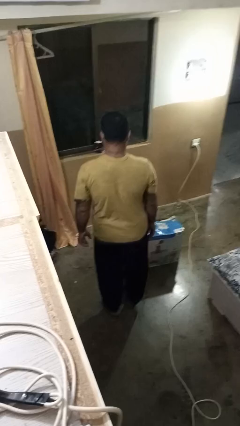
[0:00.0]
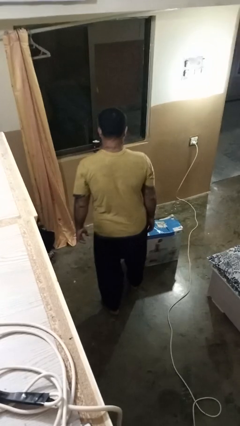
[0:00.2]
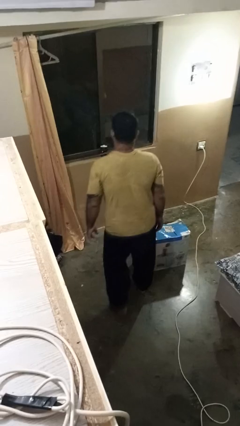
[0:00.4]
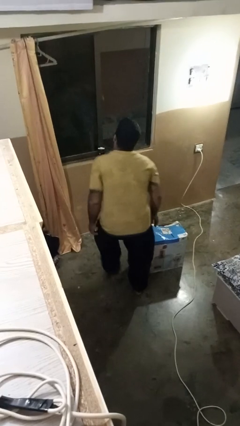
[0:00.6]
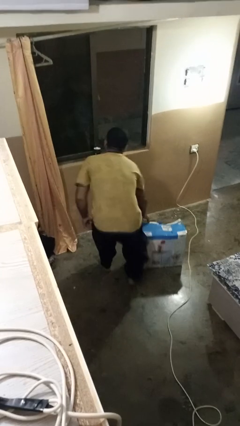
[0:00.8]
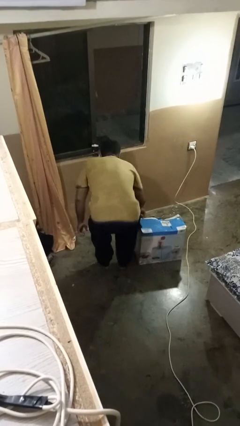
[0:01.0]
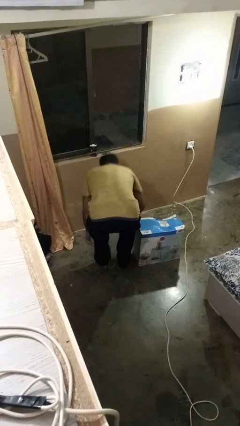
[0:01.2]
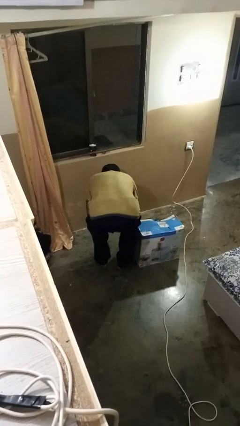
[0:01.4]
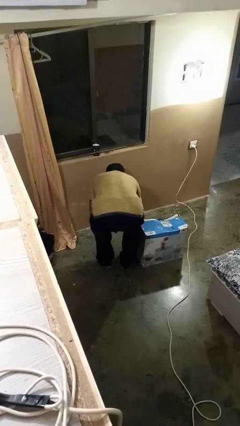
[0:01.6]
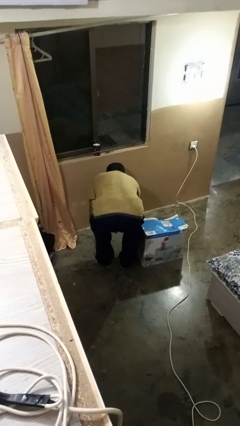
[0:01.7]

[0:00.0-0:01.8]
person trips on object on floor

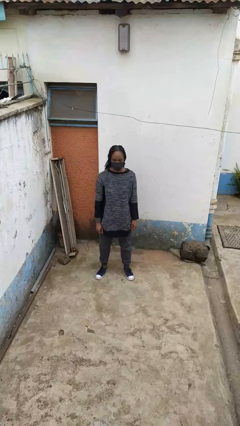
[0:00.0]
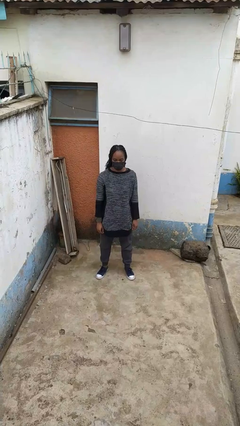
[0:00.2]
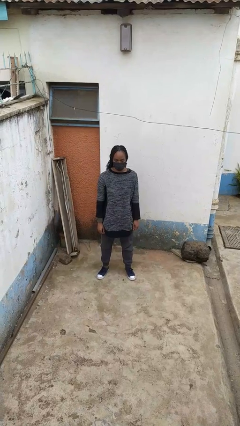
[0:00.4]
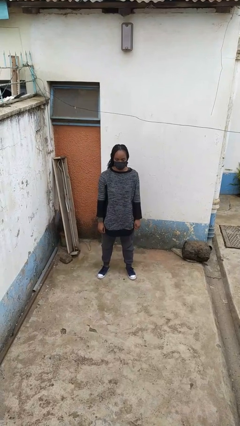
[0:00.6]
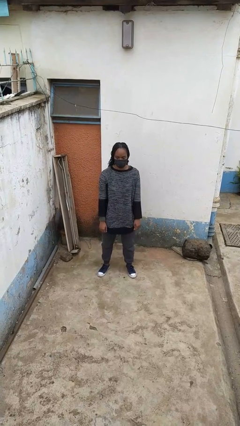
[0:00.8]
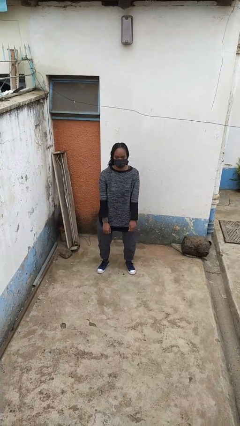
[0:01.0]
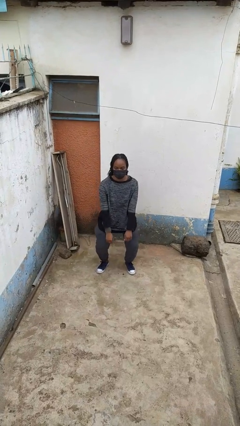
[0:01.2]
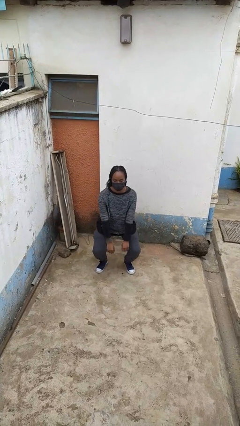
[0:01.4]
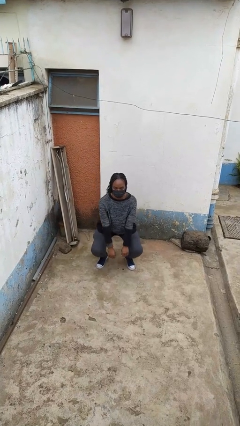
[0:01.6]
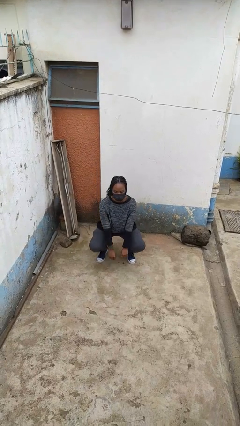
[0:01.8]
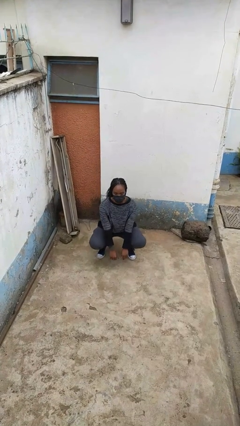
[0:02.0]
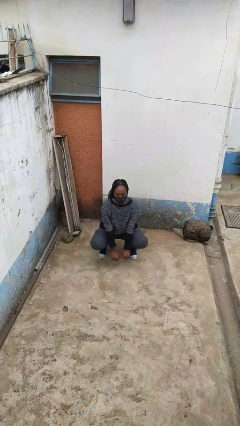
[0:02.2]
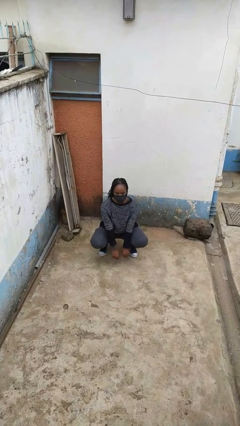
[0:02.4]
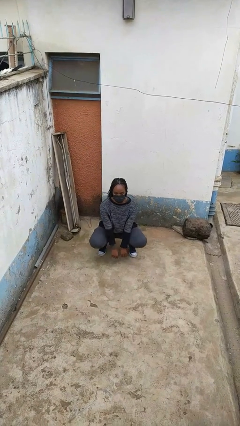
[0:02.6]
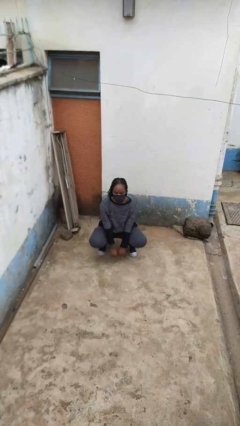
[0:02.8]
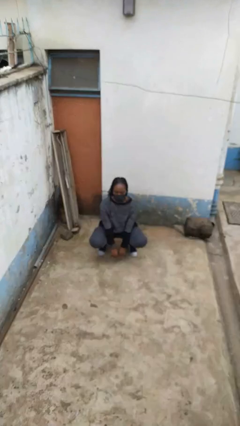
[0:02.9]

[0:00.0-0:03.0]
person squats

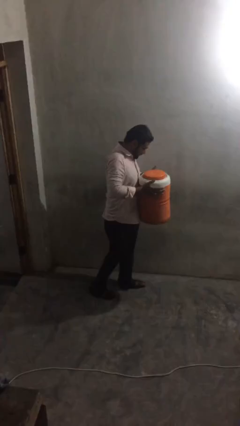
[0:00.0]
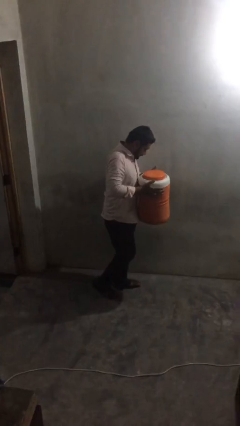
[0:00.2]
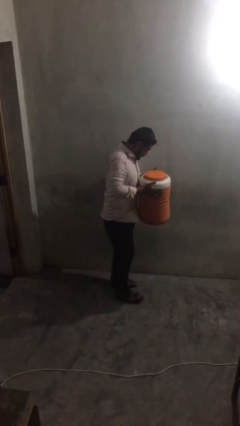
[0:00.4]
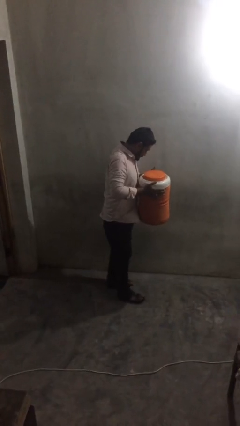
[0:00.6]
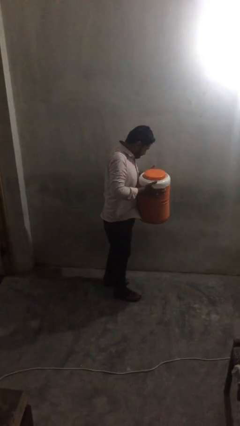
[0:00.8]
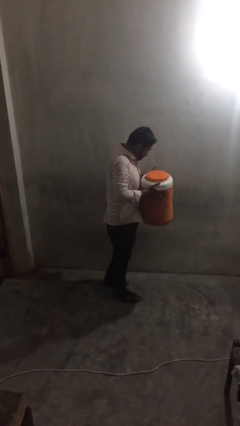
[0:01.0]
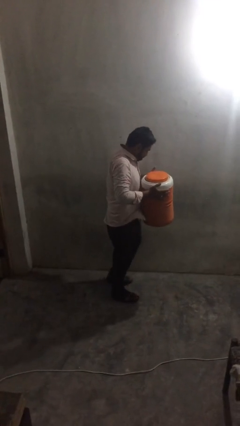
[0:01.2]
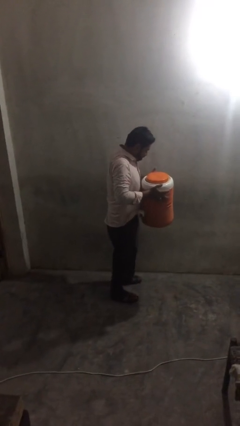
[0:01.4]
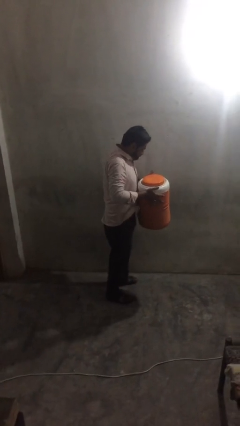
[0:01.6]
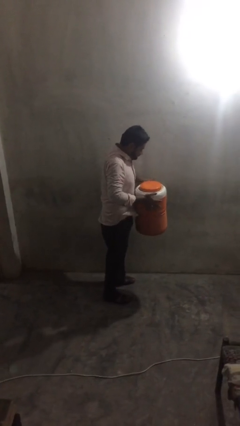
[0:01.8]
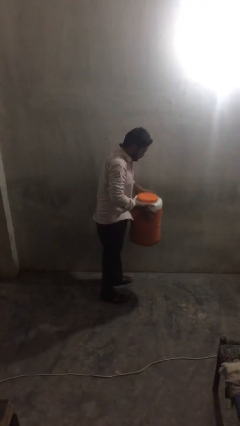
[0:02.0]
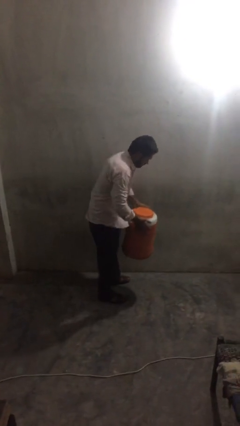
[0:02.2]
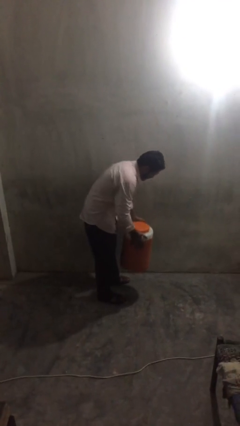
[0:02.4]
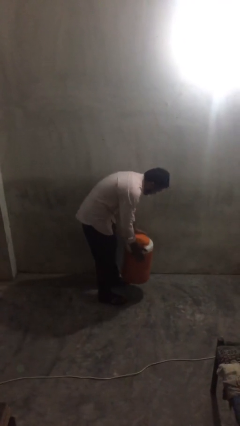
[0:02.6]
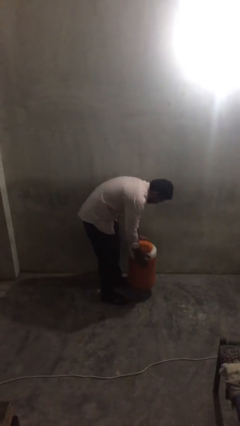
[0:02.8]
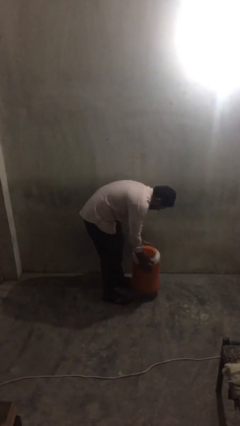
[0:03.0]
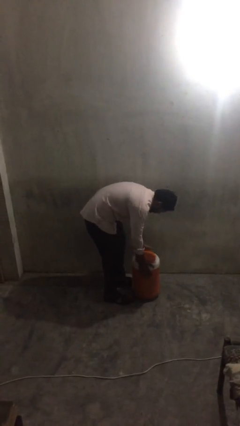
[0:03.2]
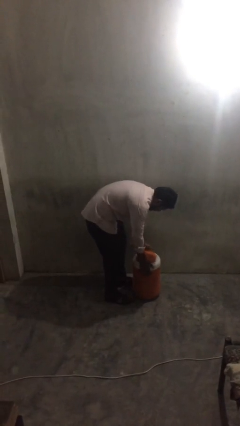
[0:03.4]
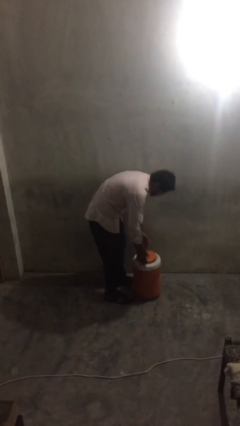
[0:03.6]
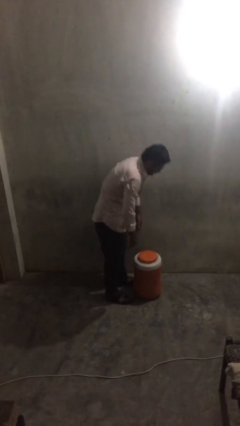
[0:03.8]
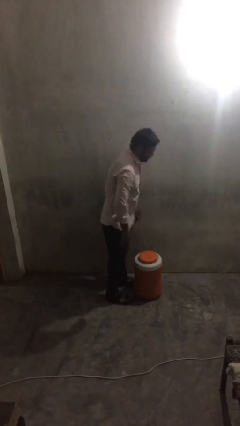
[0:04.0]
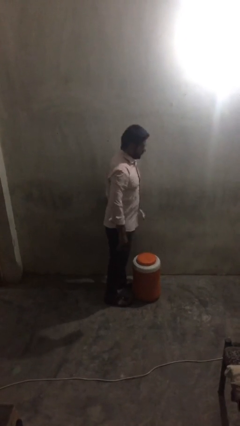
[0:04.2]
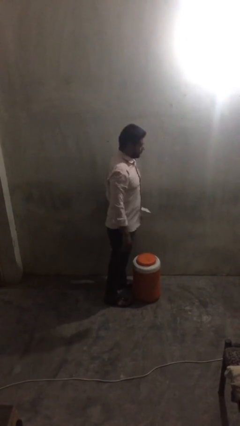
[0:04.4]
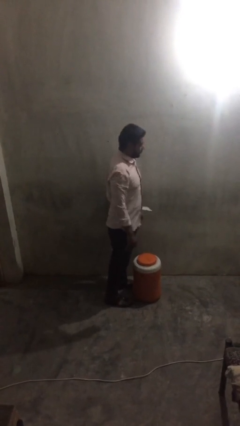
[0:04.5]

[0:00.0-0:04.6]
person puts down object on floor

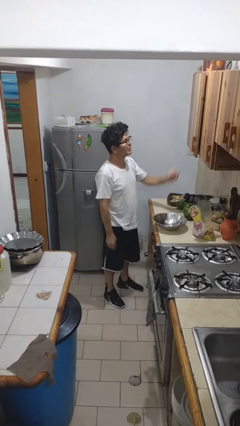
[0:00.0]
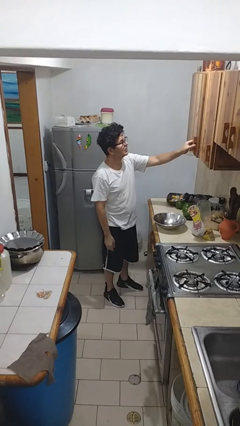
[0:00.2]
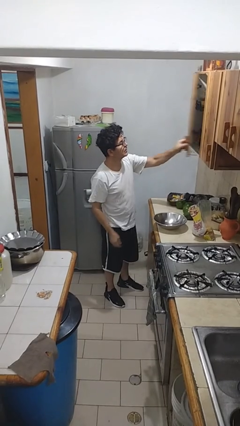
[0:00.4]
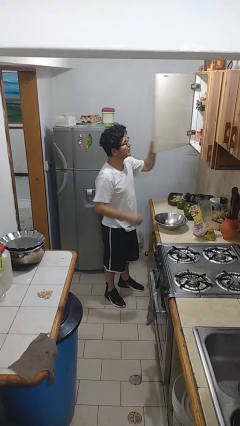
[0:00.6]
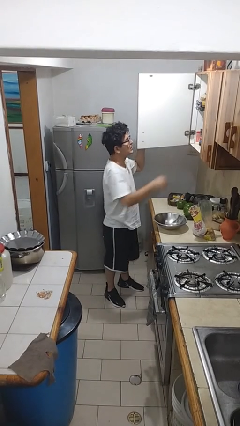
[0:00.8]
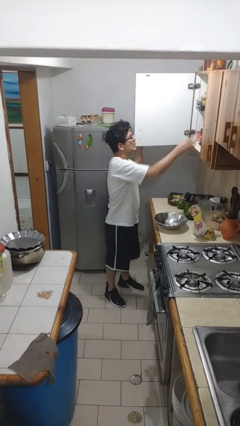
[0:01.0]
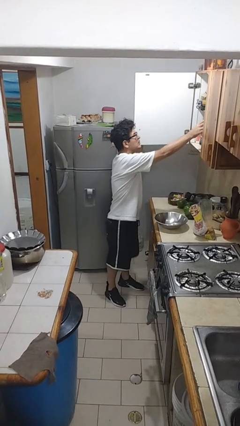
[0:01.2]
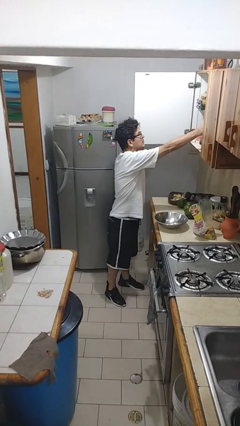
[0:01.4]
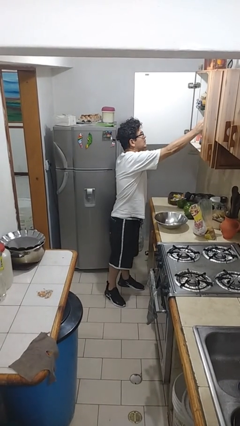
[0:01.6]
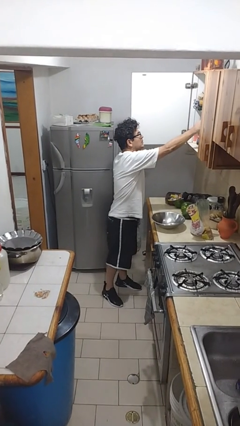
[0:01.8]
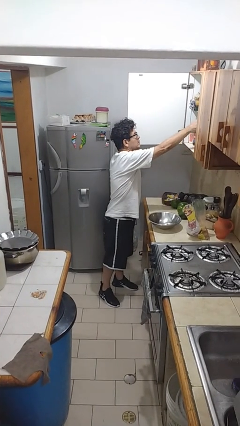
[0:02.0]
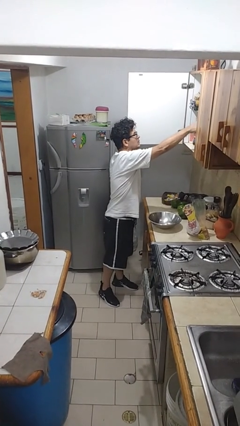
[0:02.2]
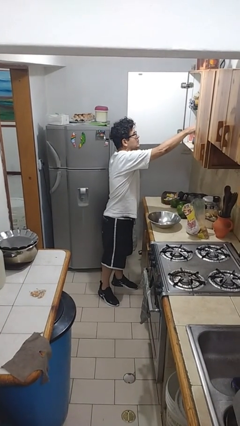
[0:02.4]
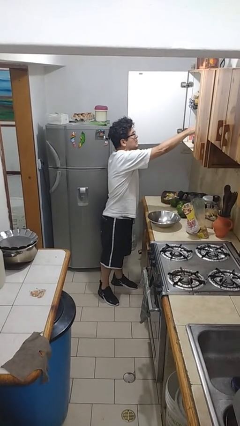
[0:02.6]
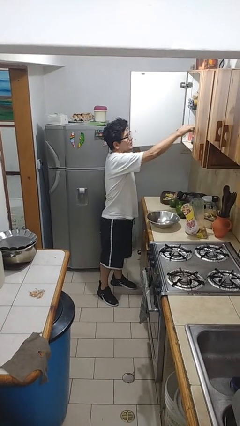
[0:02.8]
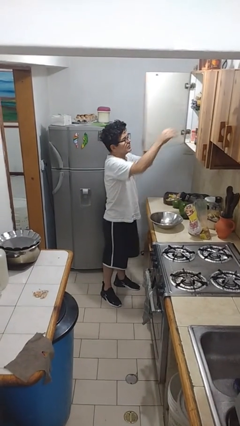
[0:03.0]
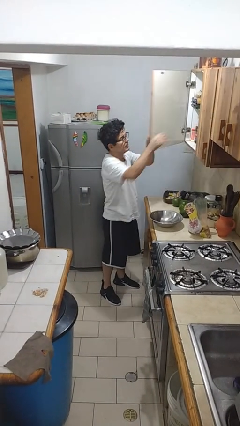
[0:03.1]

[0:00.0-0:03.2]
person searches in kitchen drawer

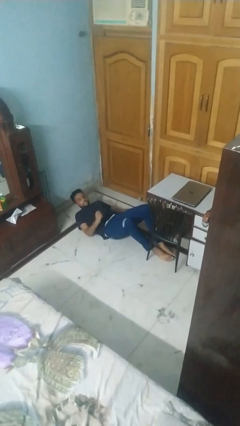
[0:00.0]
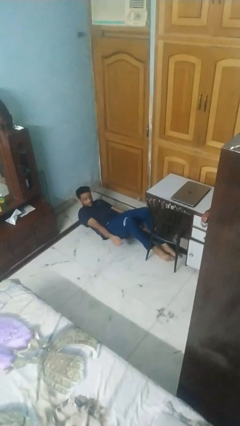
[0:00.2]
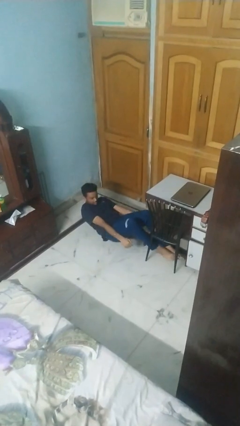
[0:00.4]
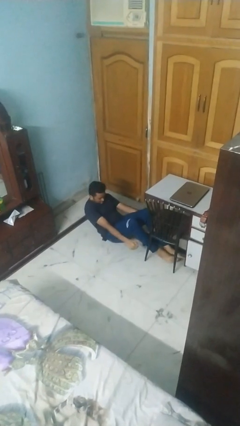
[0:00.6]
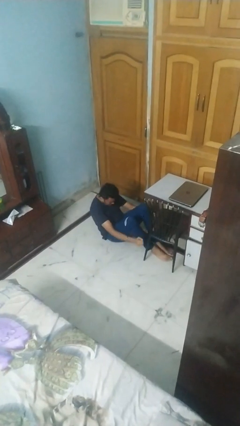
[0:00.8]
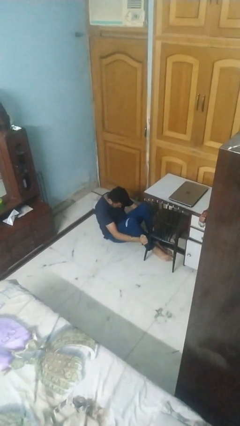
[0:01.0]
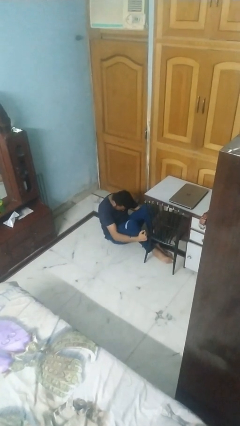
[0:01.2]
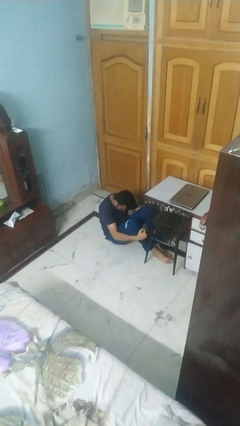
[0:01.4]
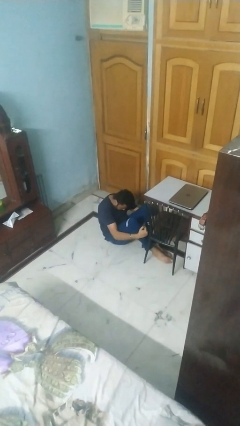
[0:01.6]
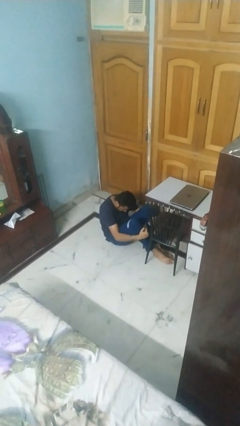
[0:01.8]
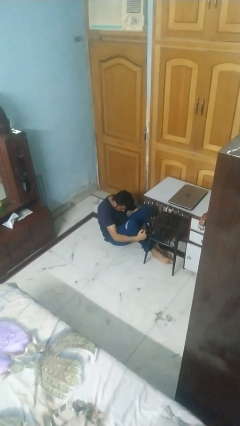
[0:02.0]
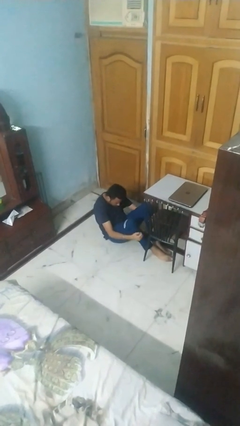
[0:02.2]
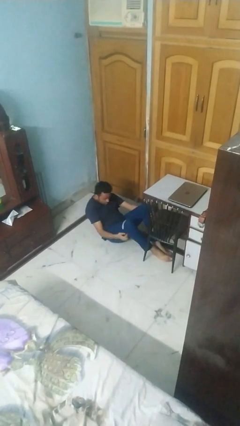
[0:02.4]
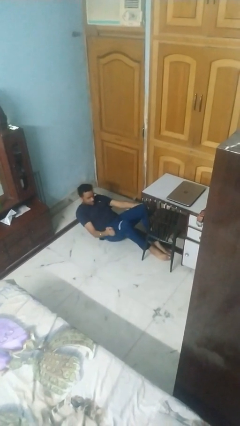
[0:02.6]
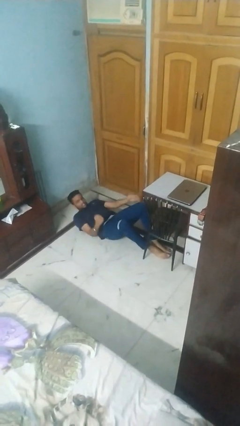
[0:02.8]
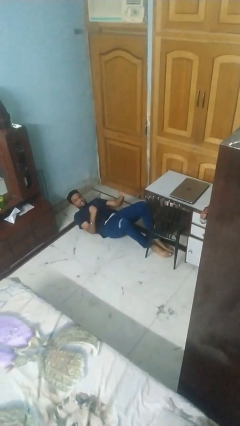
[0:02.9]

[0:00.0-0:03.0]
person exercises with situp

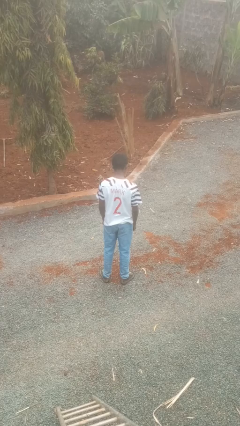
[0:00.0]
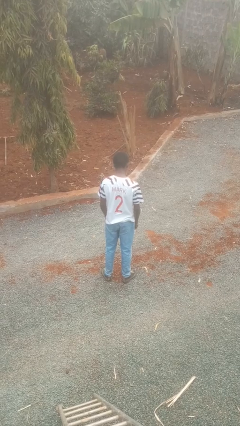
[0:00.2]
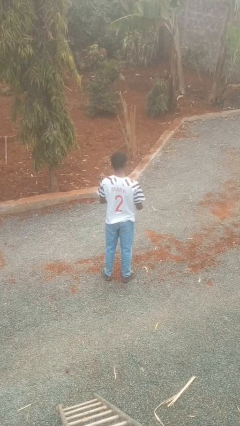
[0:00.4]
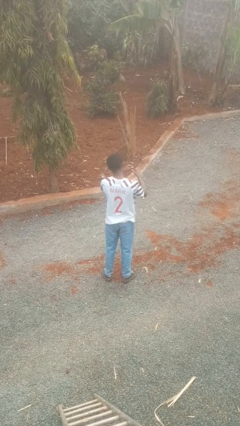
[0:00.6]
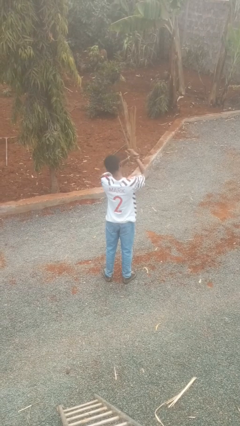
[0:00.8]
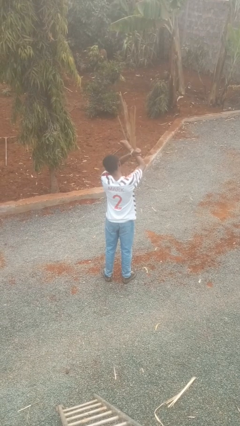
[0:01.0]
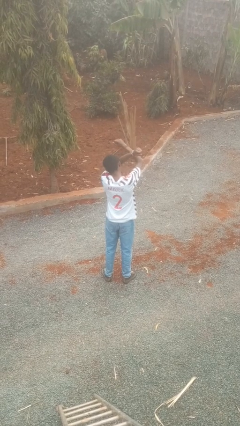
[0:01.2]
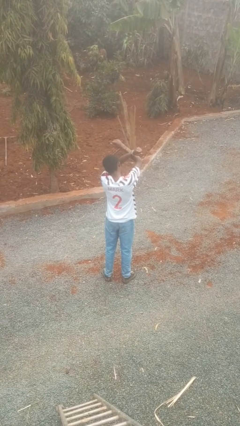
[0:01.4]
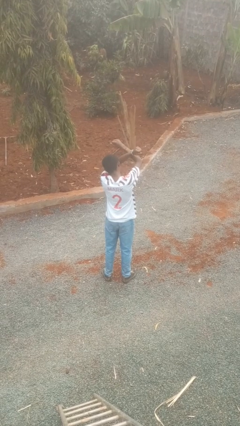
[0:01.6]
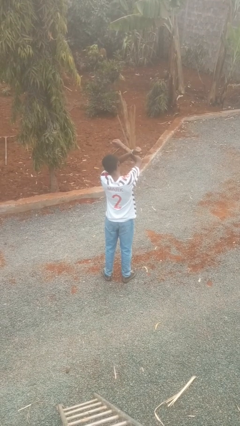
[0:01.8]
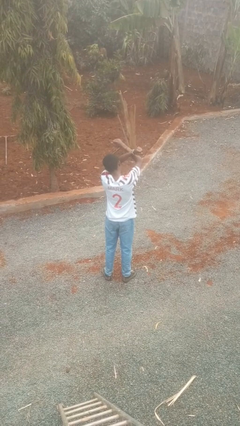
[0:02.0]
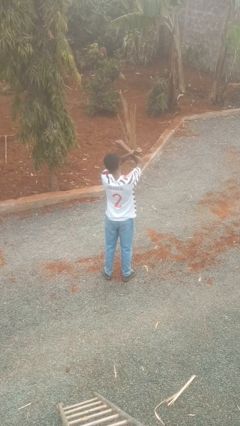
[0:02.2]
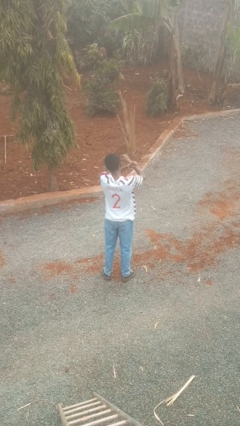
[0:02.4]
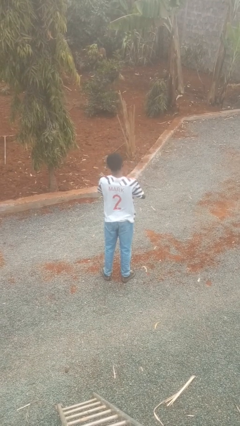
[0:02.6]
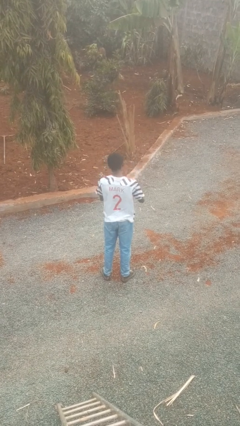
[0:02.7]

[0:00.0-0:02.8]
person gestures arms x
